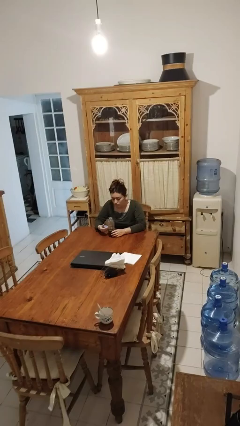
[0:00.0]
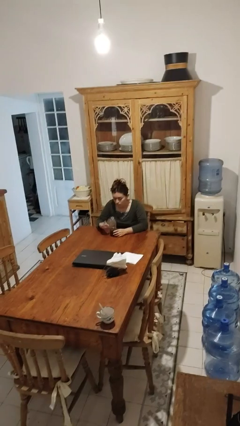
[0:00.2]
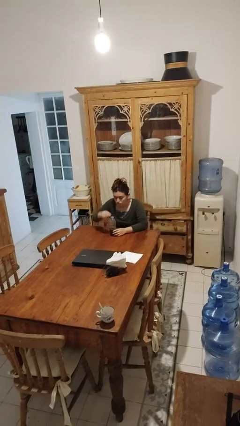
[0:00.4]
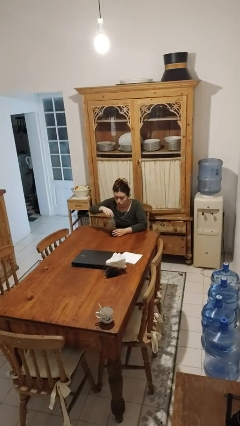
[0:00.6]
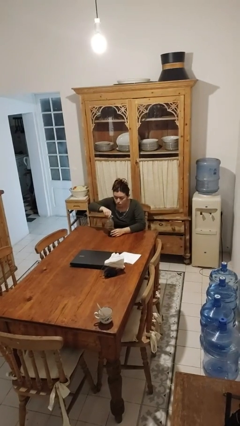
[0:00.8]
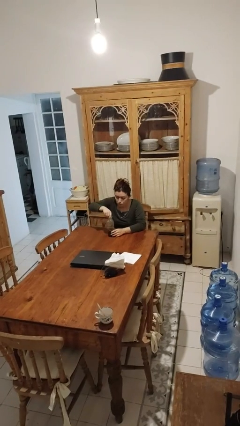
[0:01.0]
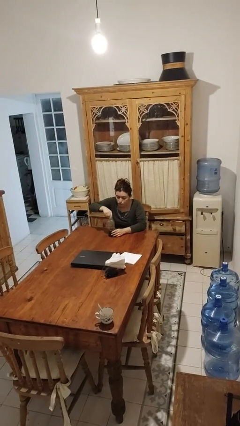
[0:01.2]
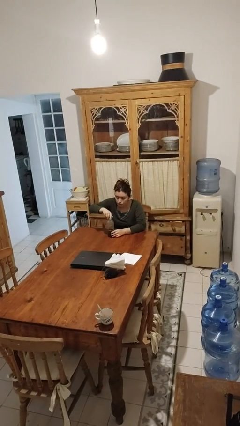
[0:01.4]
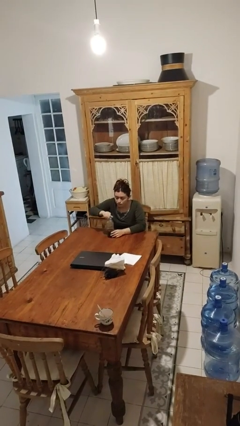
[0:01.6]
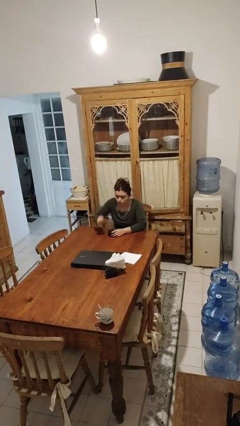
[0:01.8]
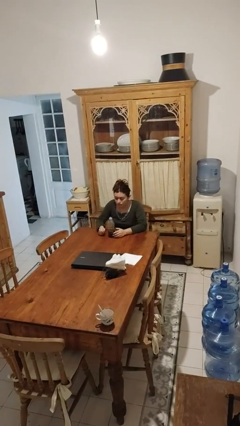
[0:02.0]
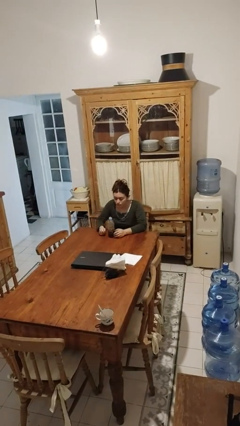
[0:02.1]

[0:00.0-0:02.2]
person screws lid to bottle

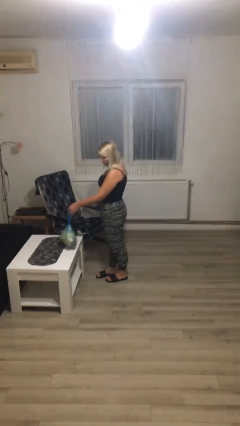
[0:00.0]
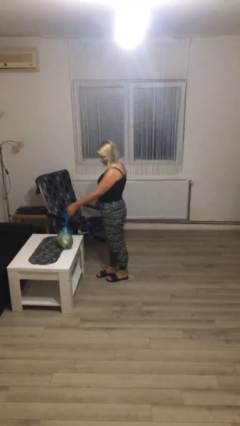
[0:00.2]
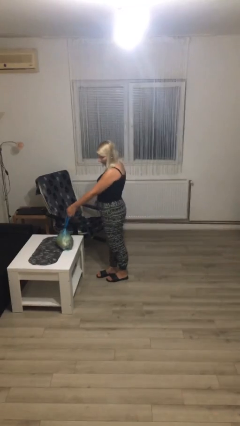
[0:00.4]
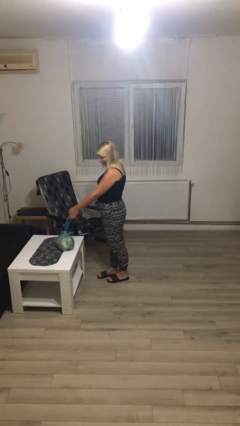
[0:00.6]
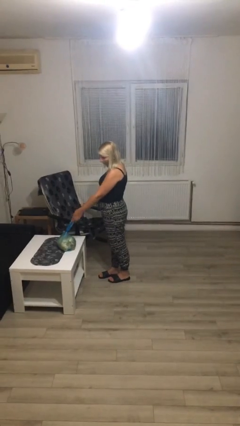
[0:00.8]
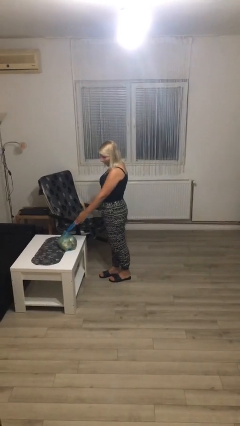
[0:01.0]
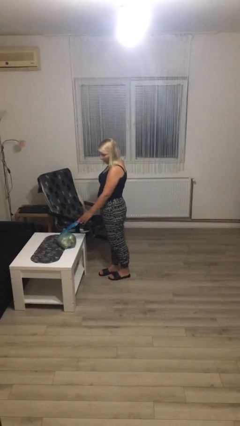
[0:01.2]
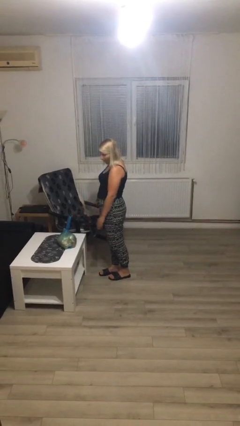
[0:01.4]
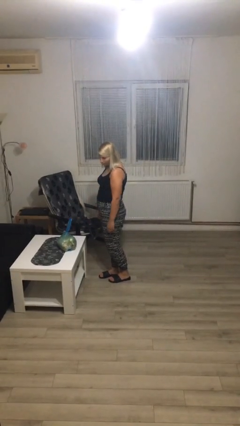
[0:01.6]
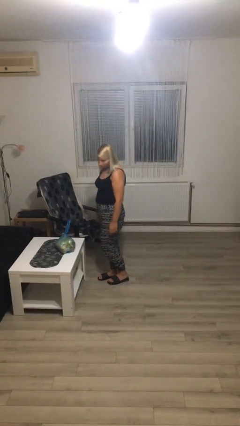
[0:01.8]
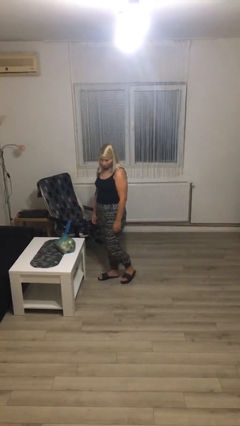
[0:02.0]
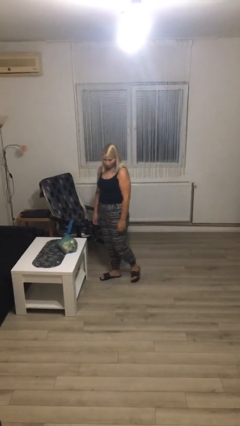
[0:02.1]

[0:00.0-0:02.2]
person puts down object on table

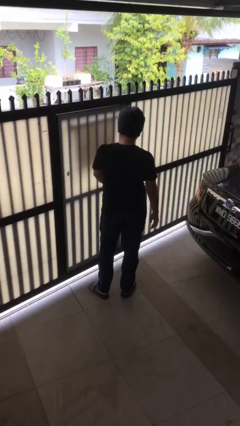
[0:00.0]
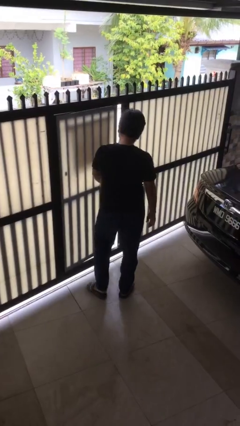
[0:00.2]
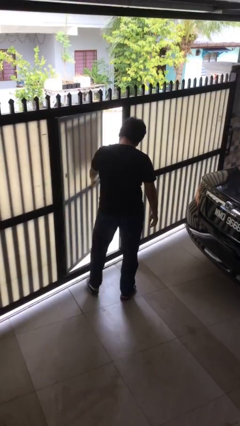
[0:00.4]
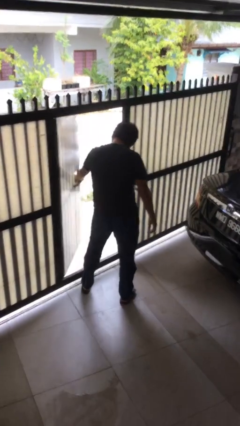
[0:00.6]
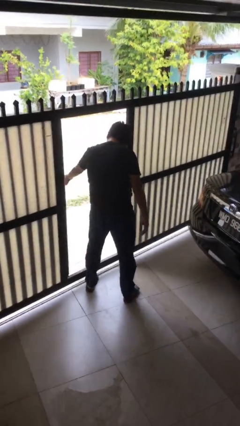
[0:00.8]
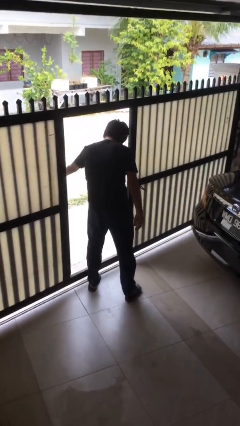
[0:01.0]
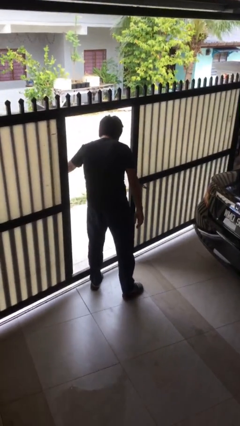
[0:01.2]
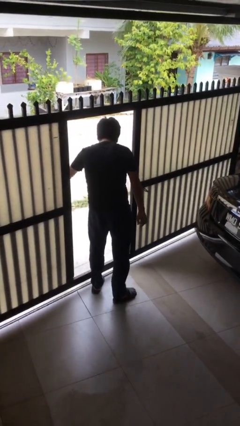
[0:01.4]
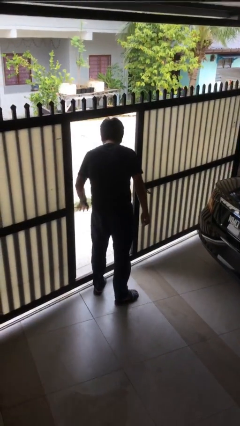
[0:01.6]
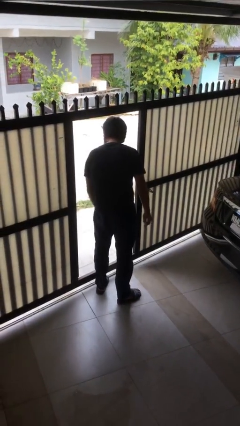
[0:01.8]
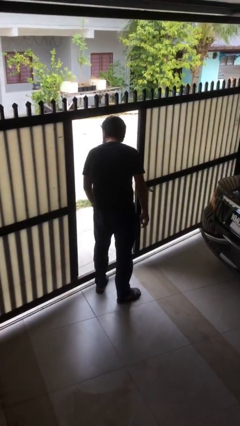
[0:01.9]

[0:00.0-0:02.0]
person opens gate

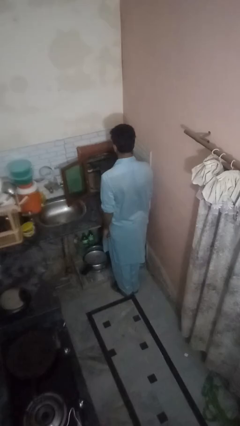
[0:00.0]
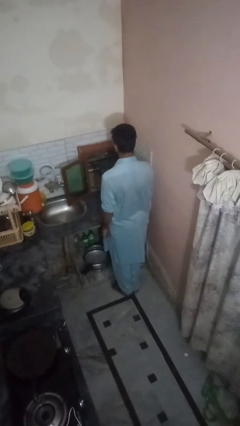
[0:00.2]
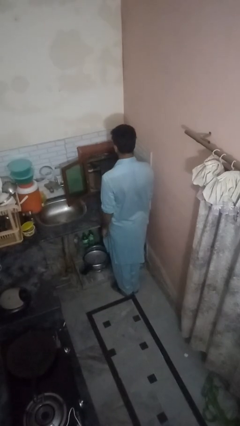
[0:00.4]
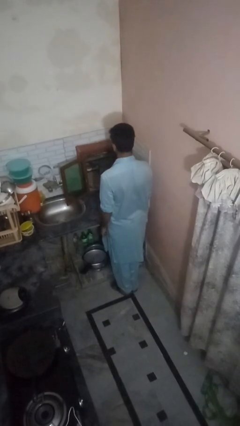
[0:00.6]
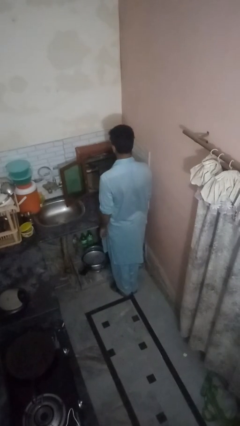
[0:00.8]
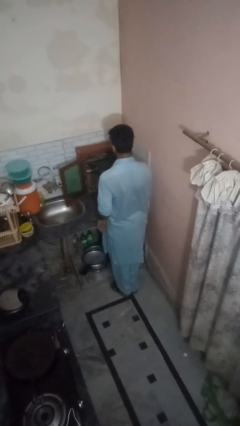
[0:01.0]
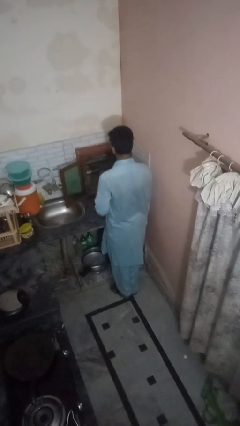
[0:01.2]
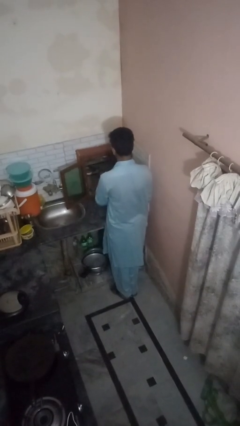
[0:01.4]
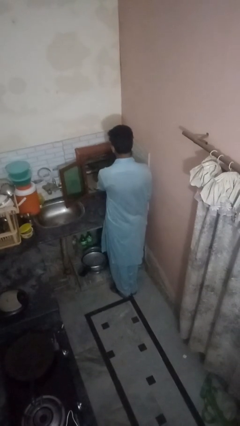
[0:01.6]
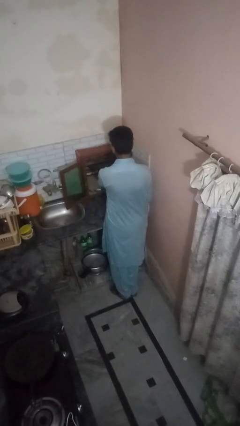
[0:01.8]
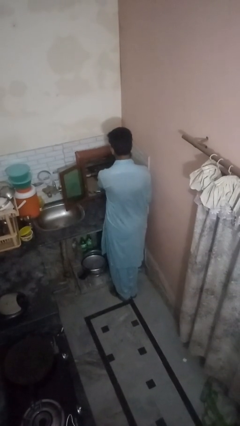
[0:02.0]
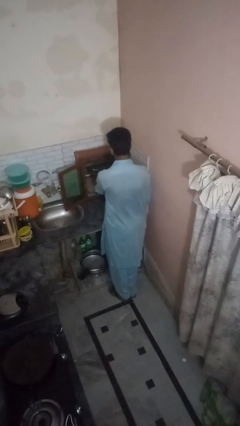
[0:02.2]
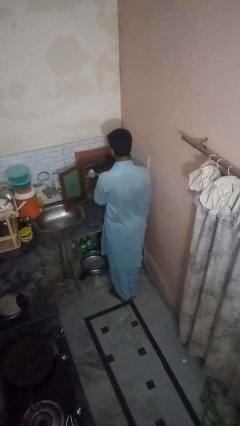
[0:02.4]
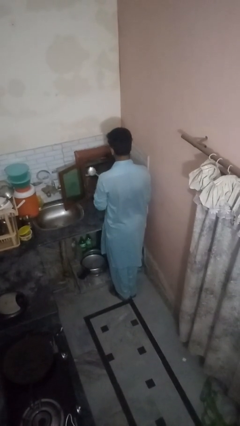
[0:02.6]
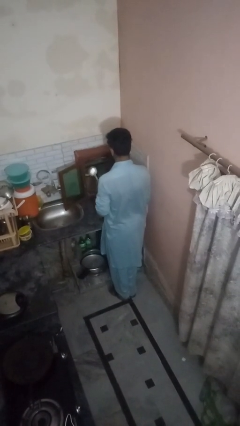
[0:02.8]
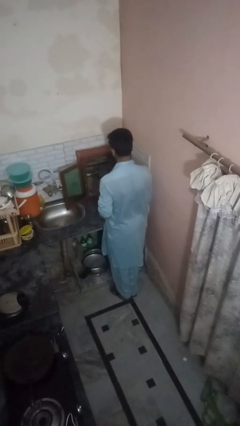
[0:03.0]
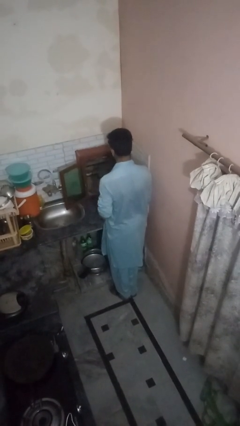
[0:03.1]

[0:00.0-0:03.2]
person takes object from kitchen drawer

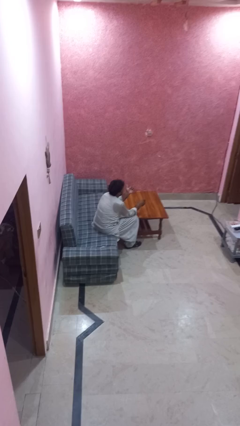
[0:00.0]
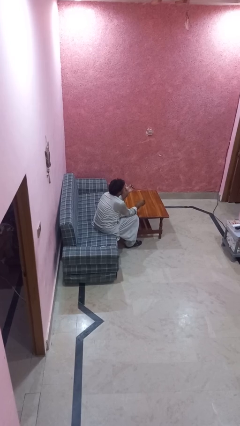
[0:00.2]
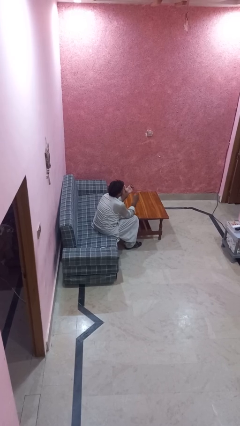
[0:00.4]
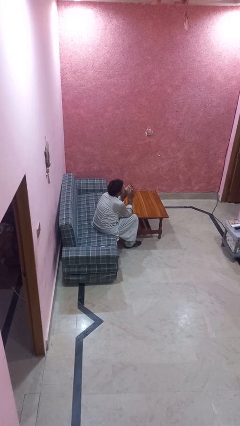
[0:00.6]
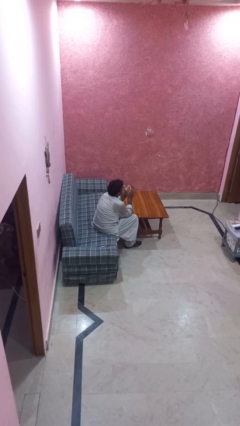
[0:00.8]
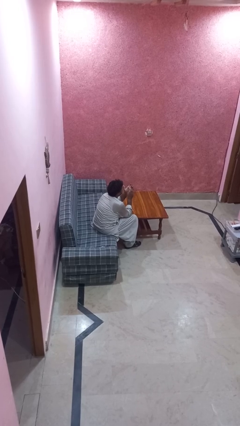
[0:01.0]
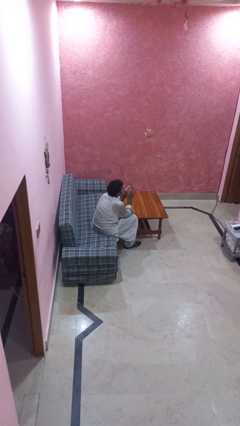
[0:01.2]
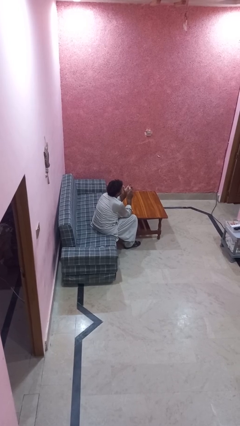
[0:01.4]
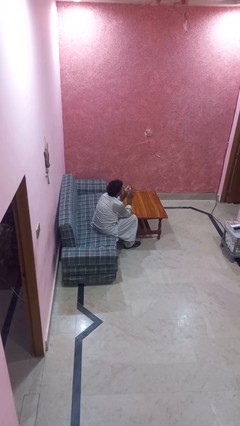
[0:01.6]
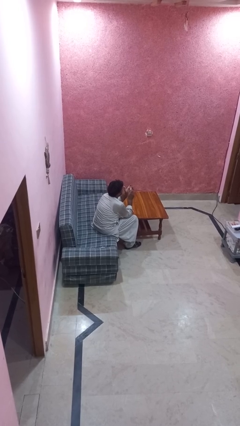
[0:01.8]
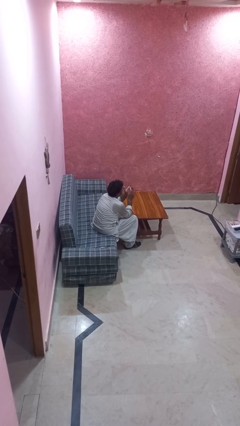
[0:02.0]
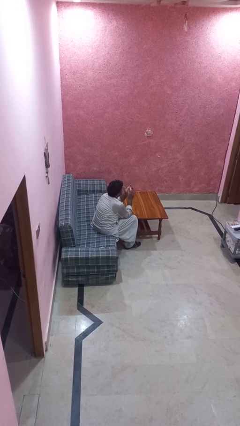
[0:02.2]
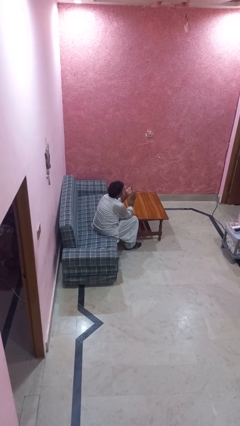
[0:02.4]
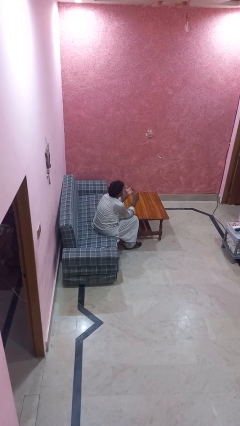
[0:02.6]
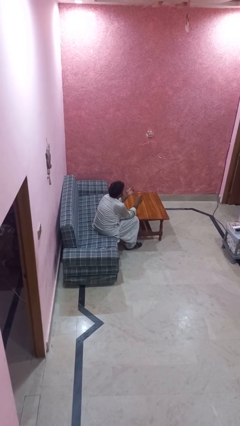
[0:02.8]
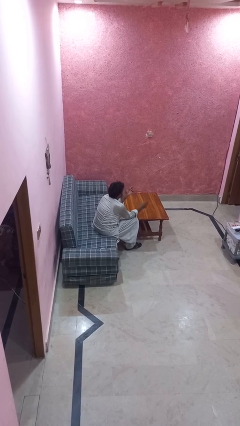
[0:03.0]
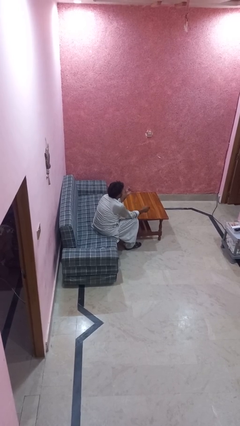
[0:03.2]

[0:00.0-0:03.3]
person clips fingernails

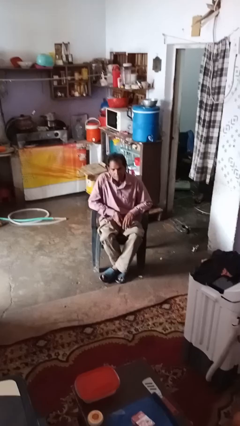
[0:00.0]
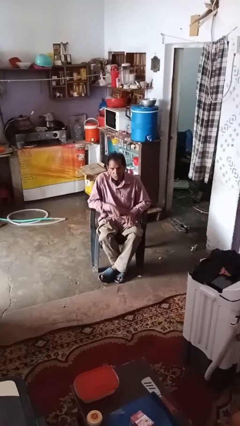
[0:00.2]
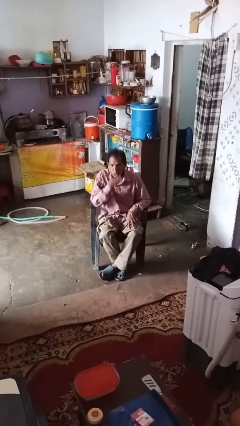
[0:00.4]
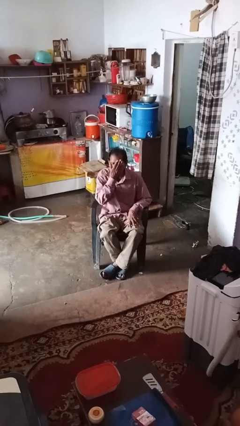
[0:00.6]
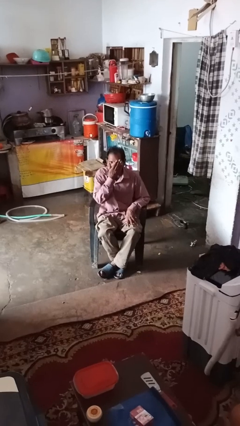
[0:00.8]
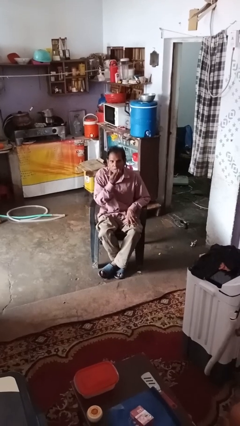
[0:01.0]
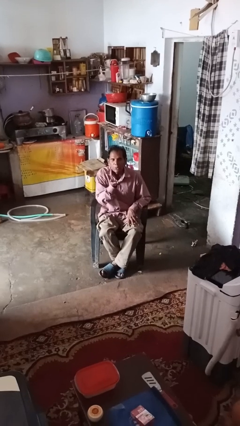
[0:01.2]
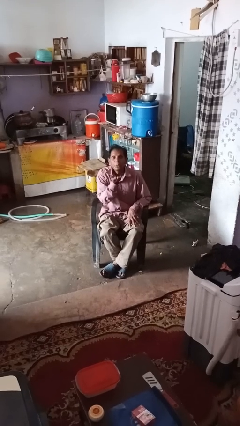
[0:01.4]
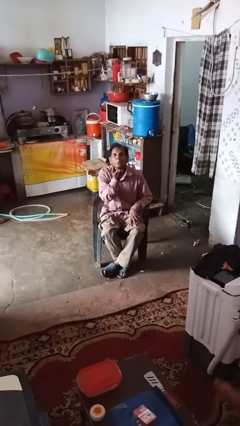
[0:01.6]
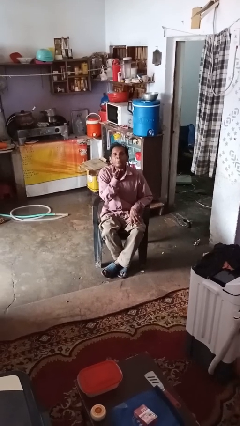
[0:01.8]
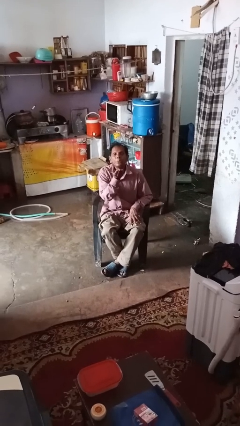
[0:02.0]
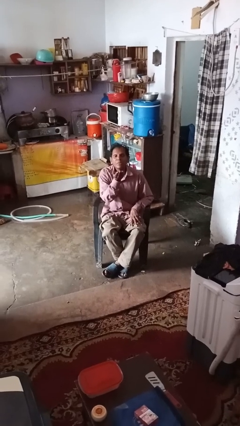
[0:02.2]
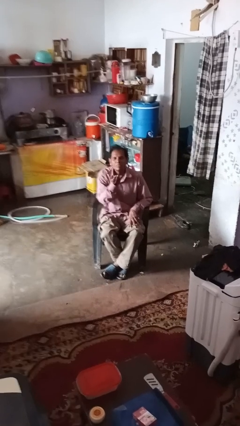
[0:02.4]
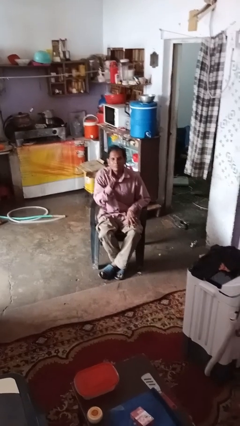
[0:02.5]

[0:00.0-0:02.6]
person gestures blow kiss

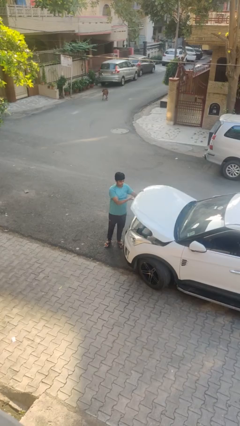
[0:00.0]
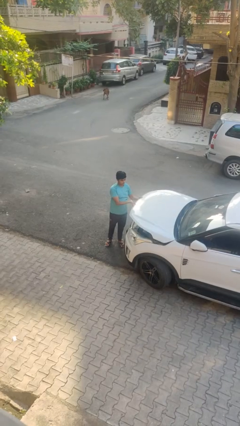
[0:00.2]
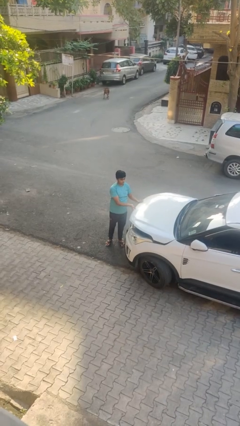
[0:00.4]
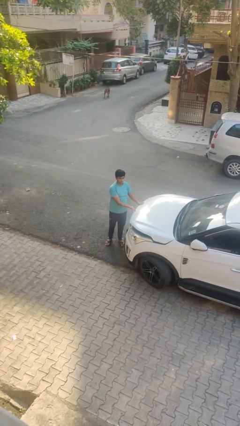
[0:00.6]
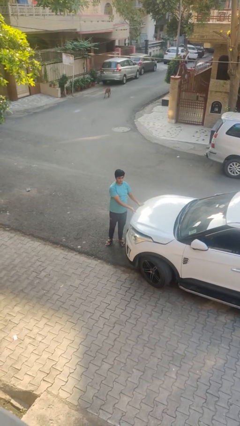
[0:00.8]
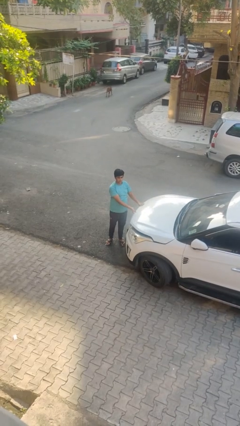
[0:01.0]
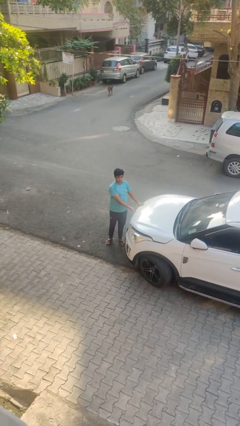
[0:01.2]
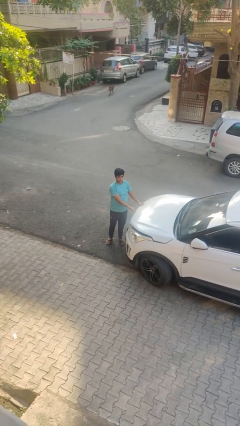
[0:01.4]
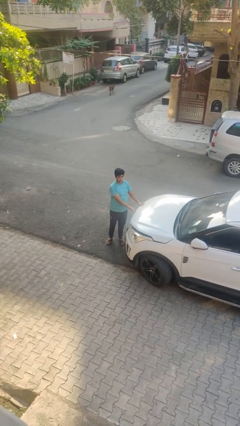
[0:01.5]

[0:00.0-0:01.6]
person closes car hood
